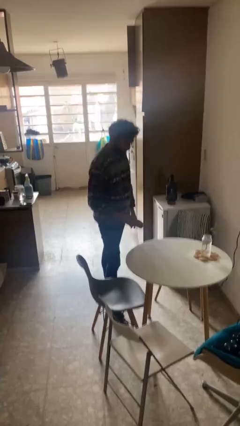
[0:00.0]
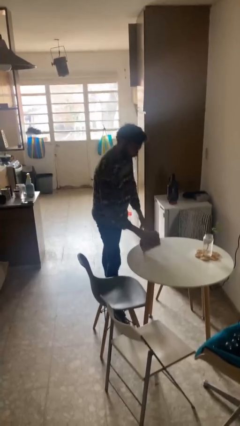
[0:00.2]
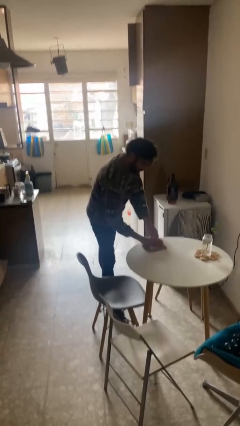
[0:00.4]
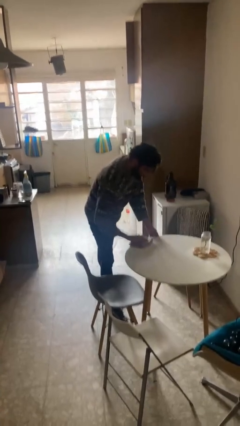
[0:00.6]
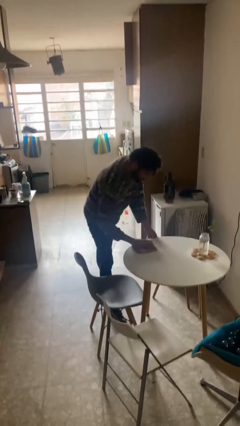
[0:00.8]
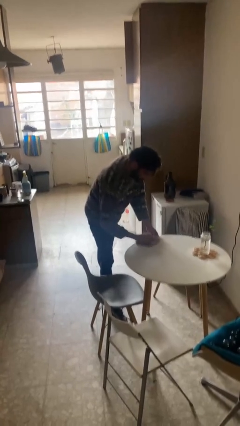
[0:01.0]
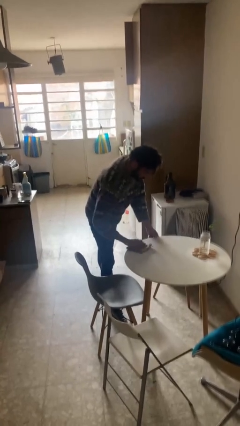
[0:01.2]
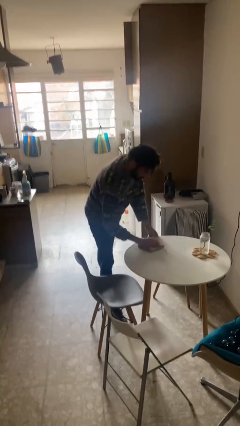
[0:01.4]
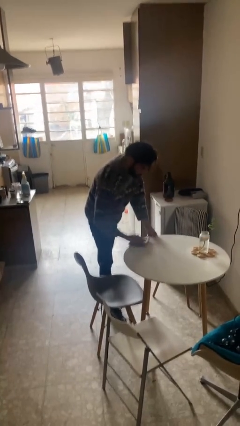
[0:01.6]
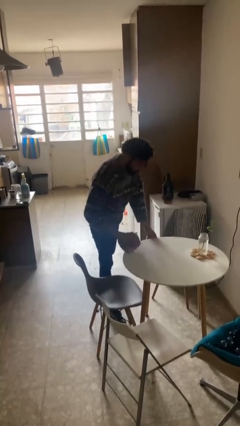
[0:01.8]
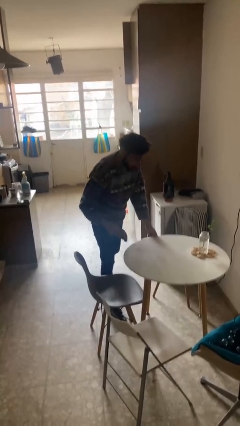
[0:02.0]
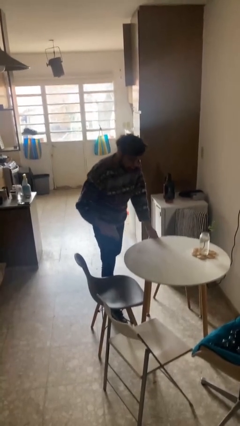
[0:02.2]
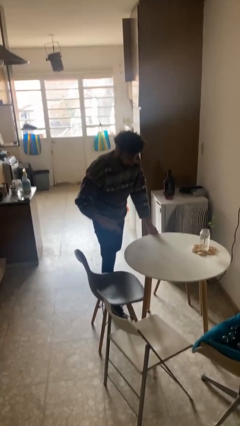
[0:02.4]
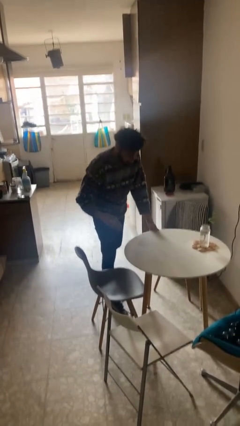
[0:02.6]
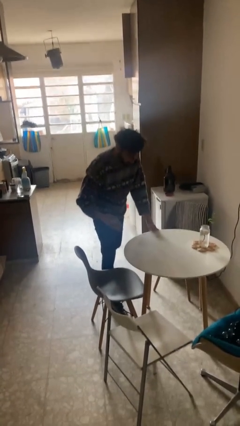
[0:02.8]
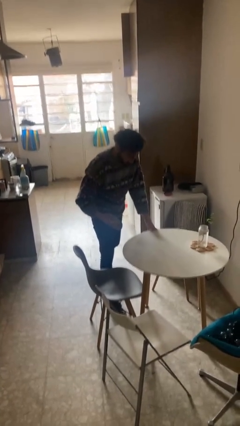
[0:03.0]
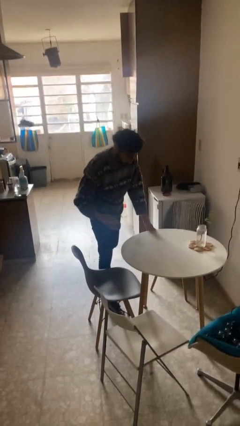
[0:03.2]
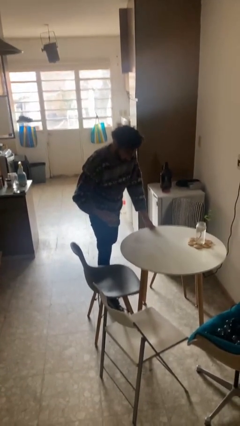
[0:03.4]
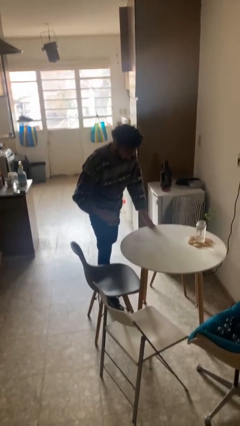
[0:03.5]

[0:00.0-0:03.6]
person cleans table with rag

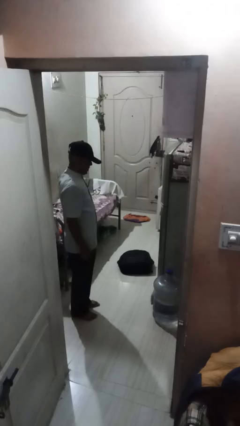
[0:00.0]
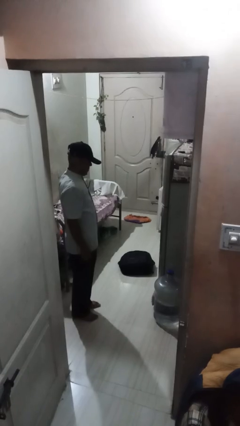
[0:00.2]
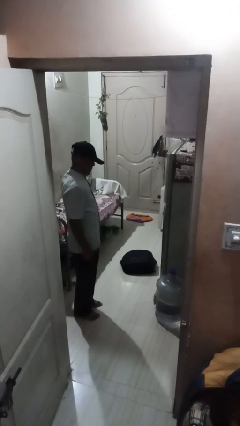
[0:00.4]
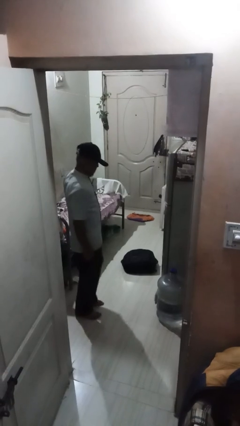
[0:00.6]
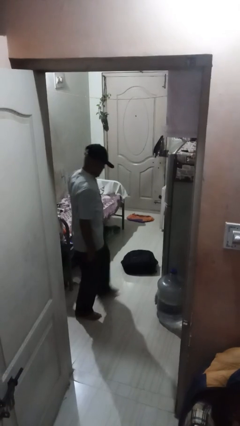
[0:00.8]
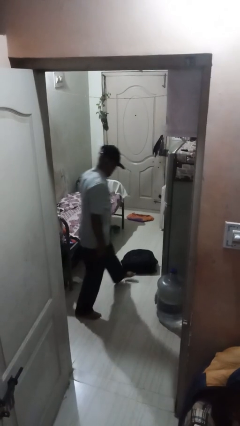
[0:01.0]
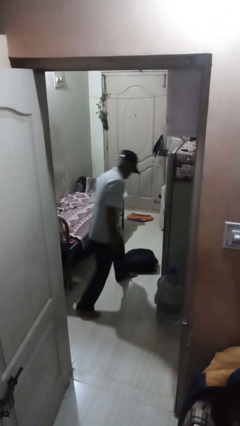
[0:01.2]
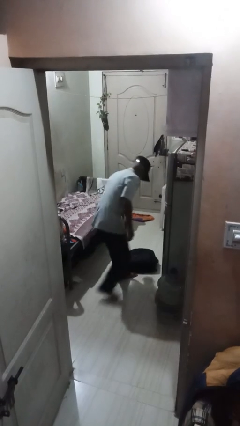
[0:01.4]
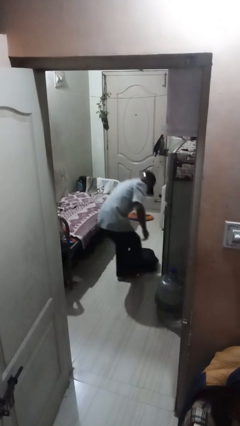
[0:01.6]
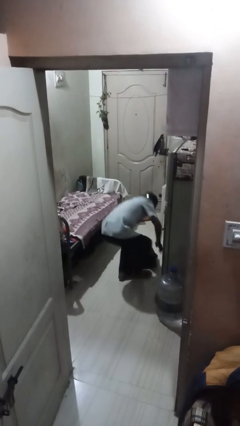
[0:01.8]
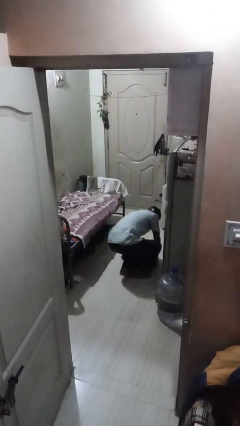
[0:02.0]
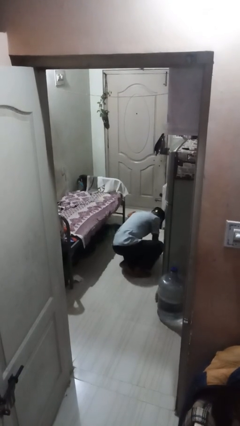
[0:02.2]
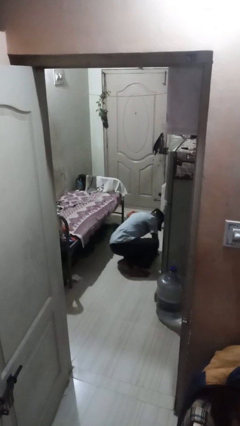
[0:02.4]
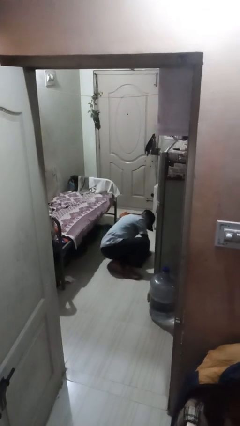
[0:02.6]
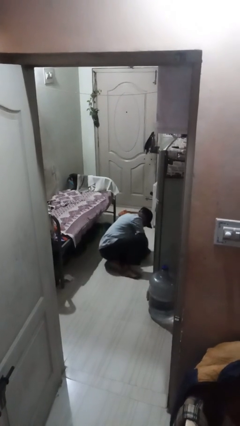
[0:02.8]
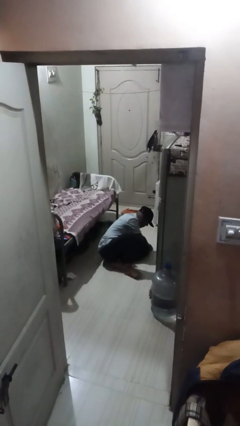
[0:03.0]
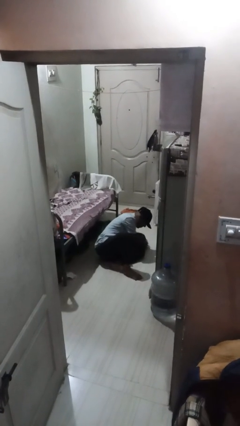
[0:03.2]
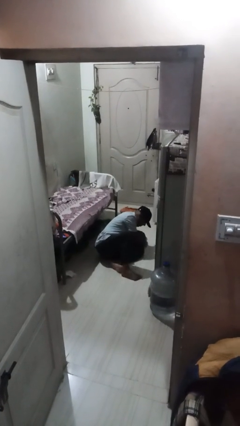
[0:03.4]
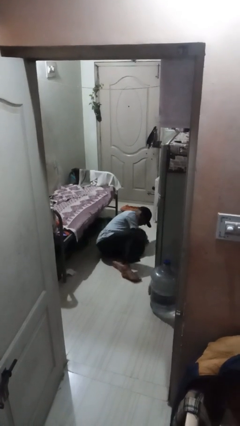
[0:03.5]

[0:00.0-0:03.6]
person trips on object on floor

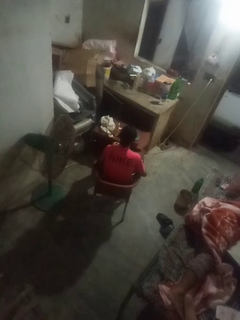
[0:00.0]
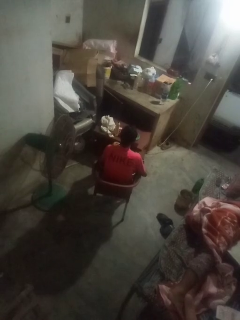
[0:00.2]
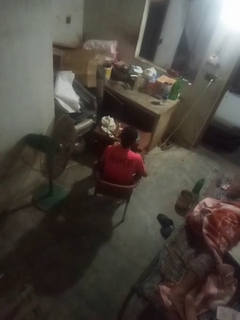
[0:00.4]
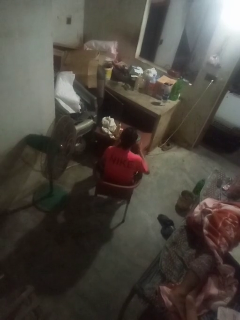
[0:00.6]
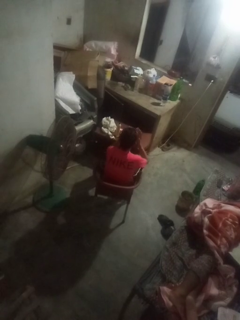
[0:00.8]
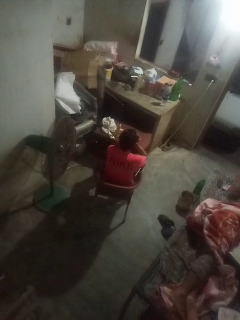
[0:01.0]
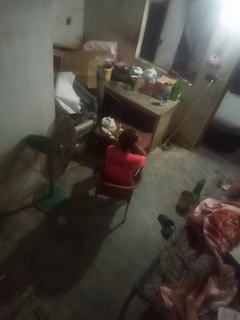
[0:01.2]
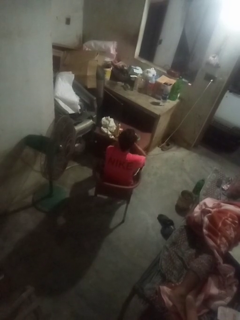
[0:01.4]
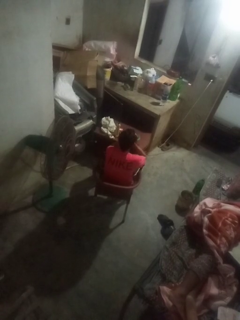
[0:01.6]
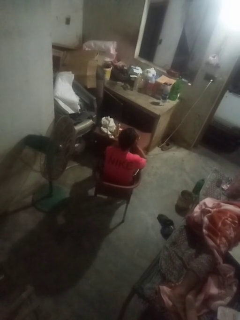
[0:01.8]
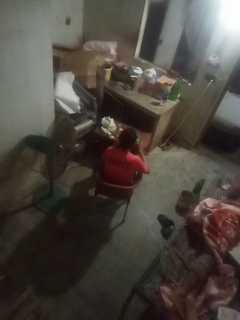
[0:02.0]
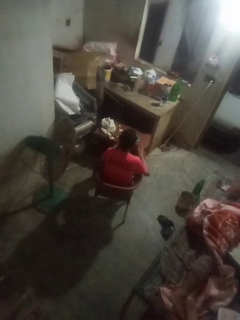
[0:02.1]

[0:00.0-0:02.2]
person yawns

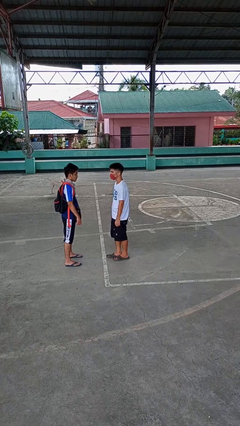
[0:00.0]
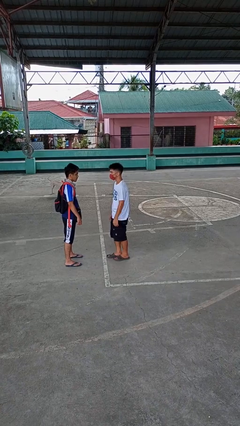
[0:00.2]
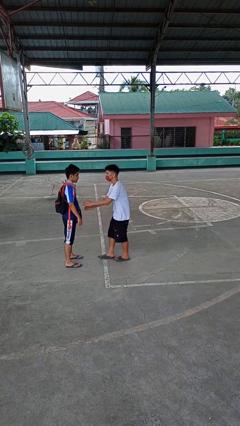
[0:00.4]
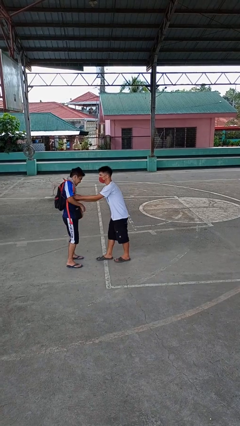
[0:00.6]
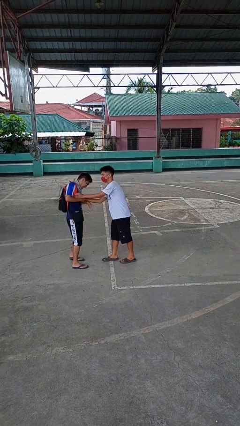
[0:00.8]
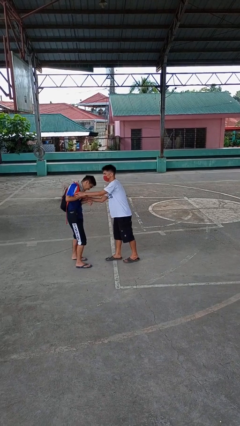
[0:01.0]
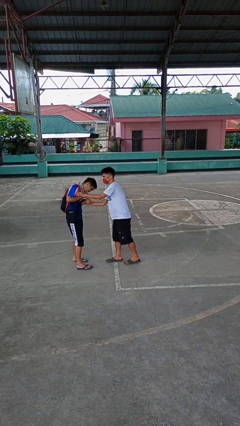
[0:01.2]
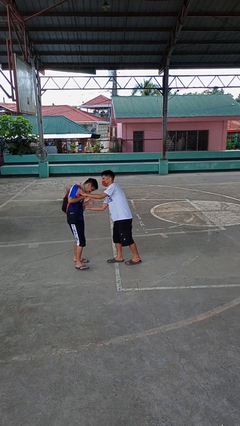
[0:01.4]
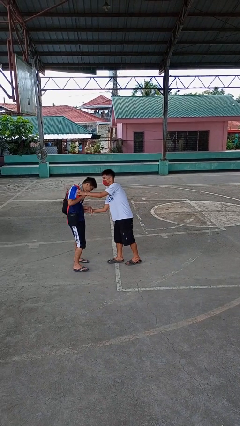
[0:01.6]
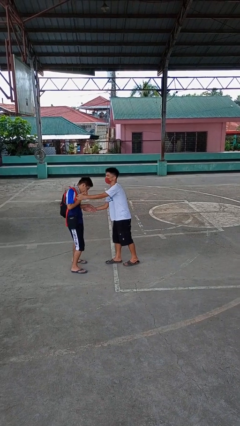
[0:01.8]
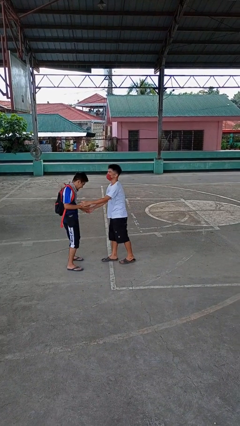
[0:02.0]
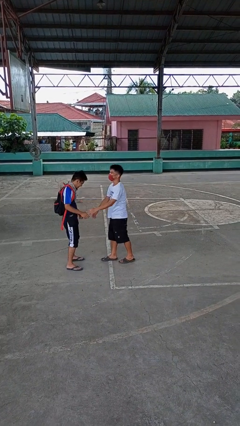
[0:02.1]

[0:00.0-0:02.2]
person tickles person

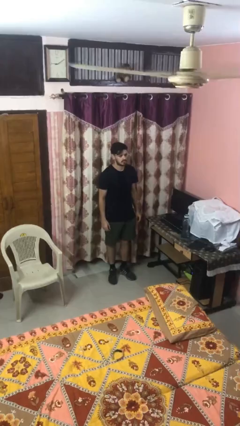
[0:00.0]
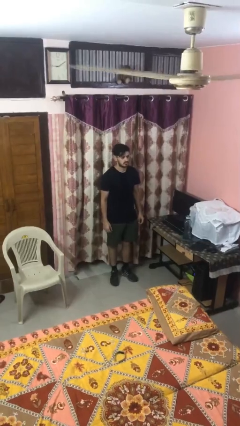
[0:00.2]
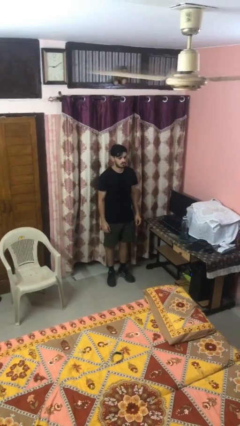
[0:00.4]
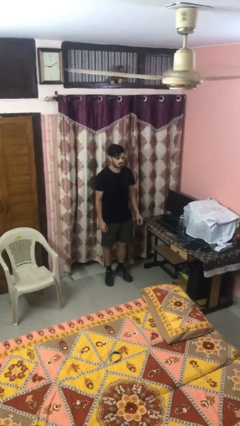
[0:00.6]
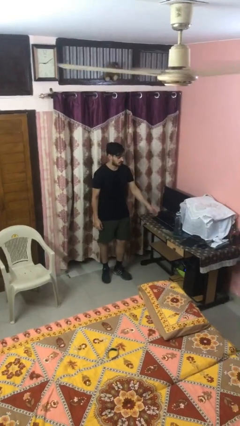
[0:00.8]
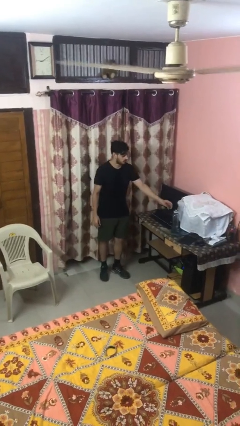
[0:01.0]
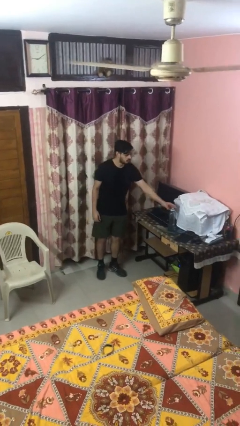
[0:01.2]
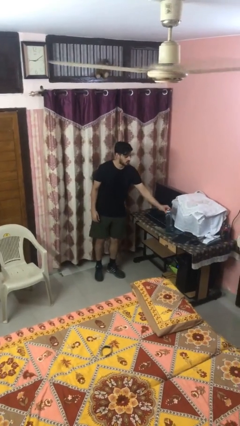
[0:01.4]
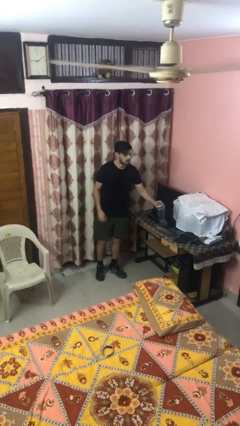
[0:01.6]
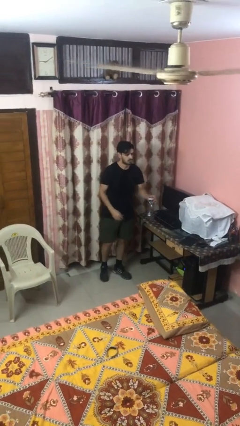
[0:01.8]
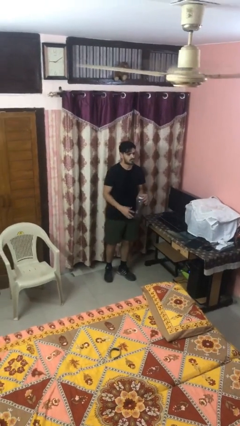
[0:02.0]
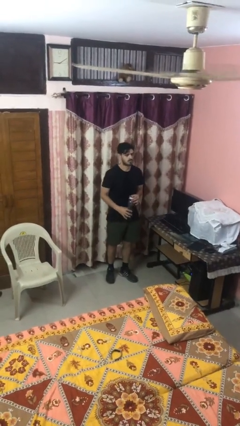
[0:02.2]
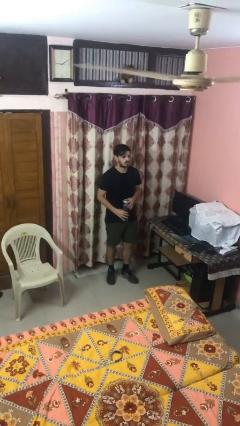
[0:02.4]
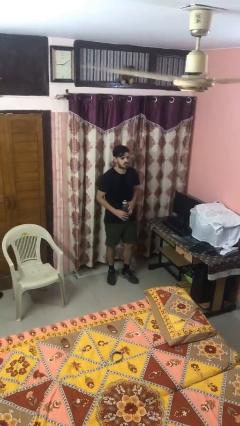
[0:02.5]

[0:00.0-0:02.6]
person picks up object from countertop

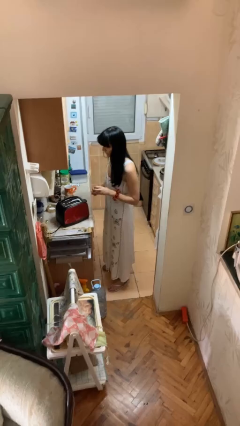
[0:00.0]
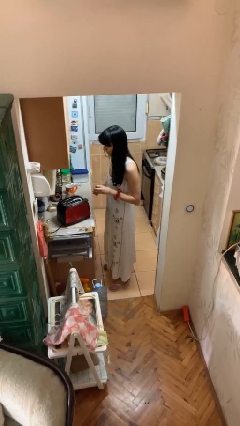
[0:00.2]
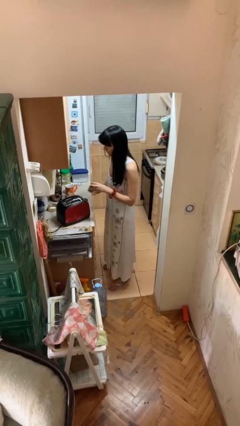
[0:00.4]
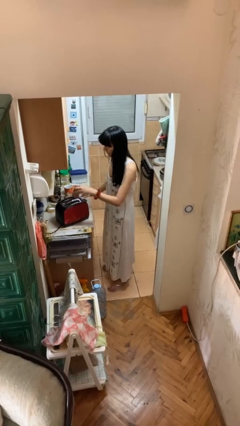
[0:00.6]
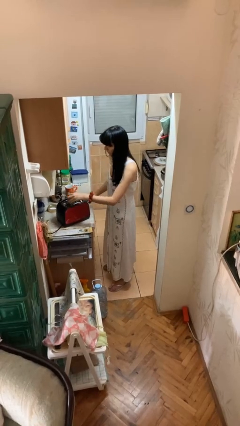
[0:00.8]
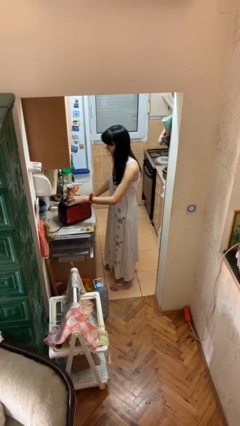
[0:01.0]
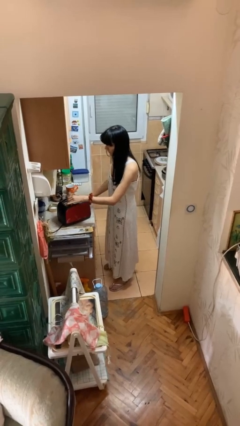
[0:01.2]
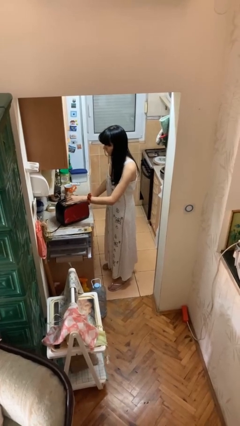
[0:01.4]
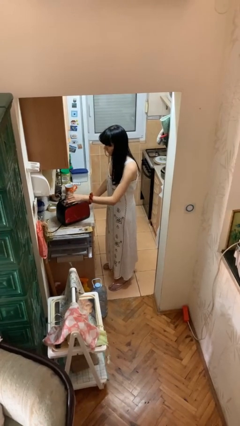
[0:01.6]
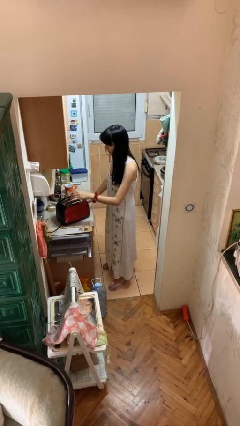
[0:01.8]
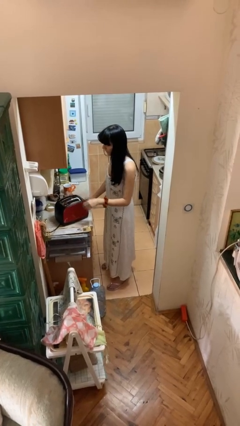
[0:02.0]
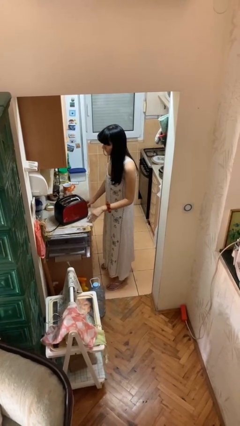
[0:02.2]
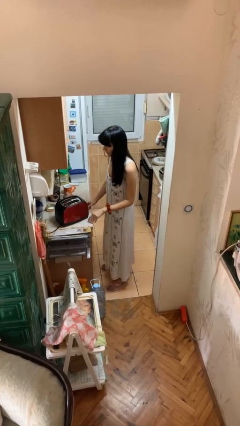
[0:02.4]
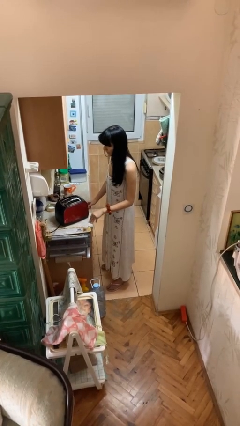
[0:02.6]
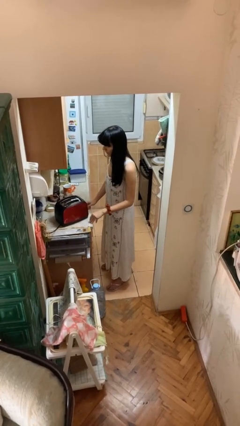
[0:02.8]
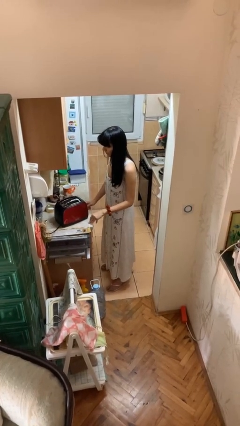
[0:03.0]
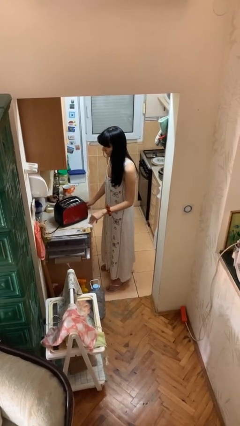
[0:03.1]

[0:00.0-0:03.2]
person puts object into toaster

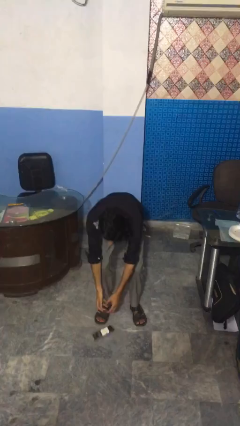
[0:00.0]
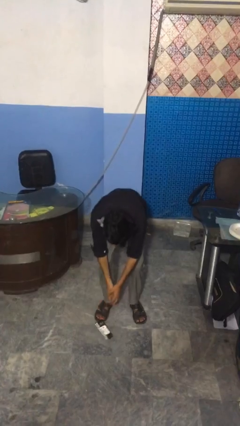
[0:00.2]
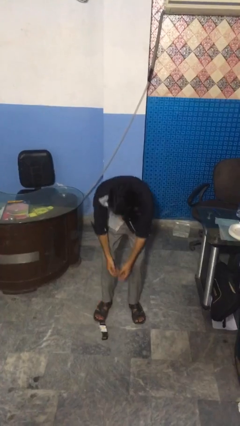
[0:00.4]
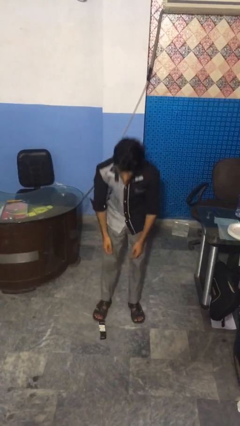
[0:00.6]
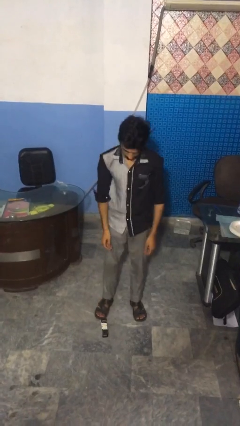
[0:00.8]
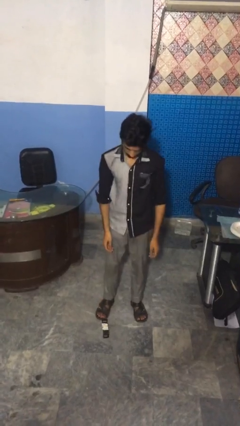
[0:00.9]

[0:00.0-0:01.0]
person catches dropped object
